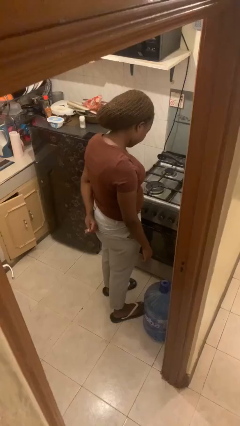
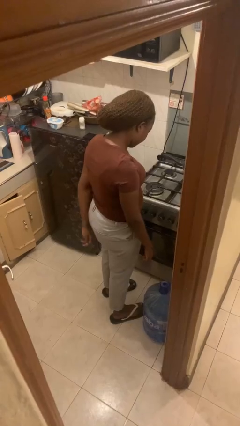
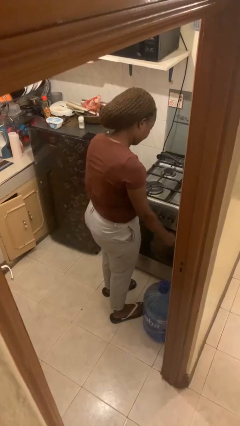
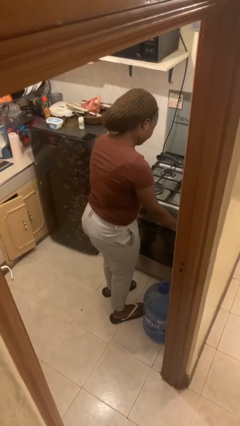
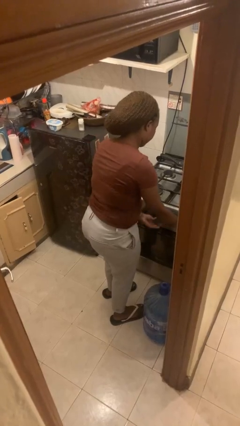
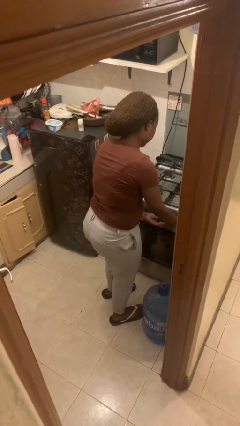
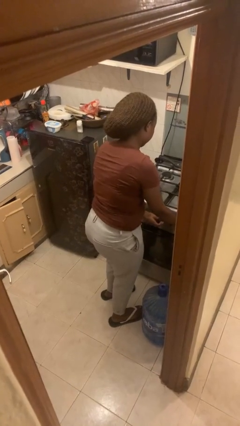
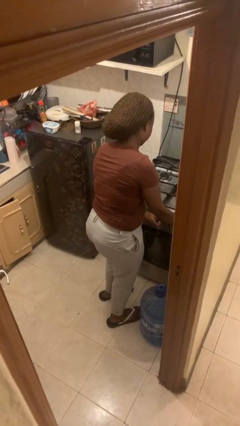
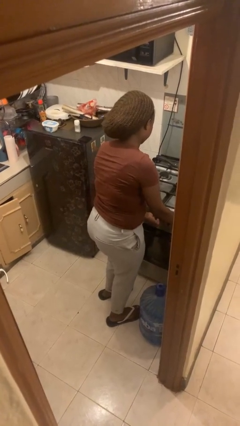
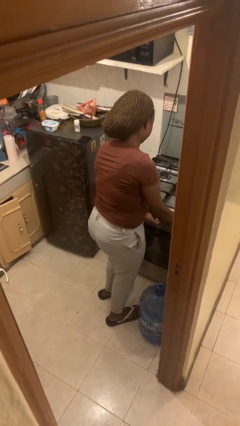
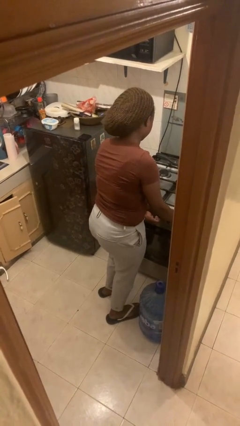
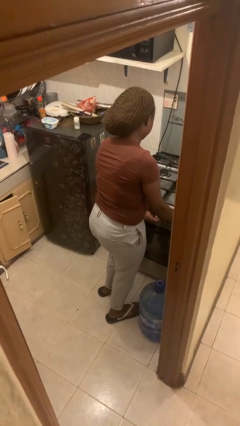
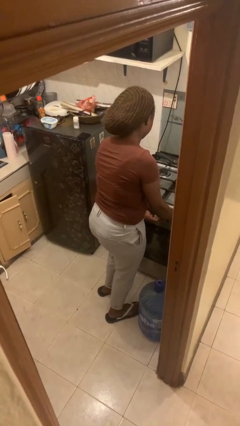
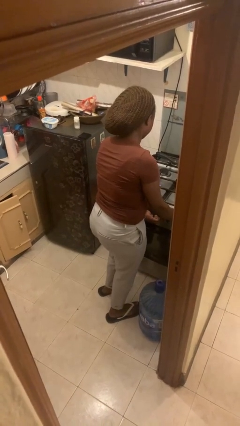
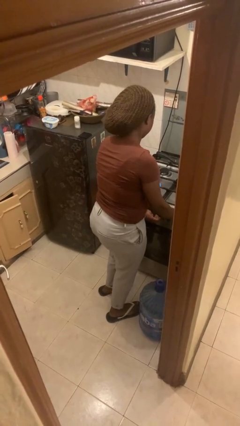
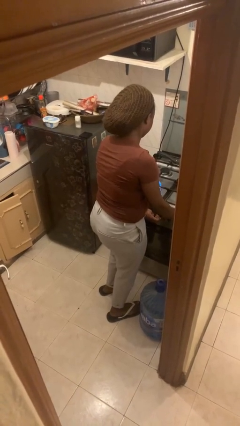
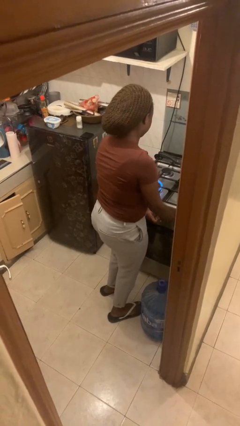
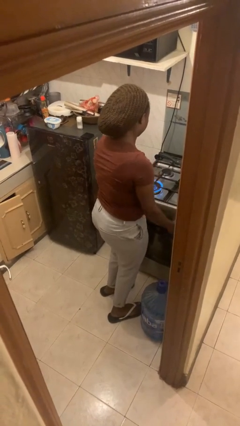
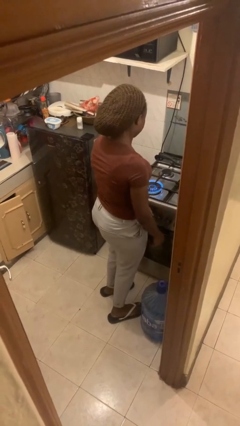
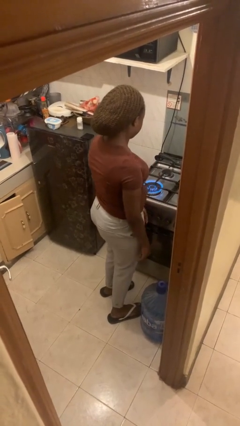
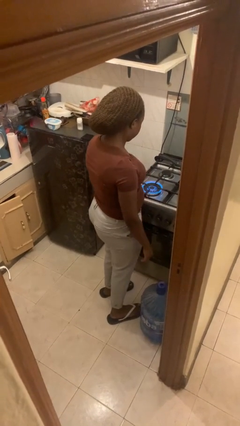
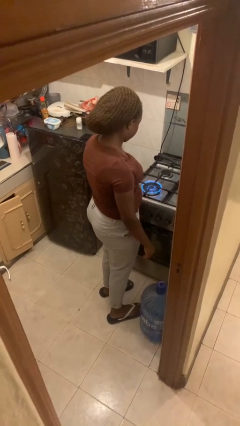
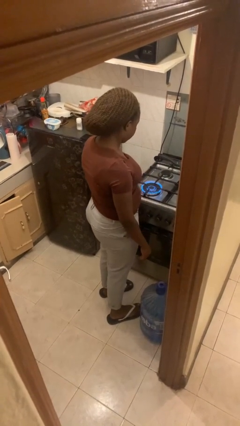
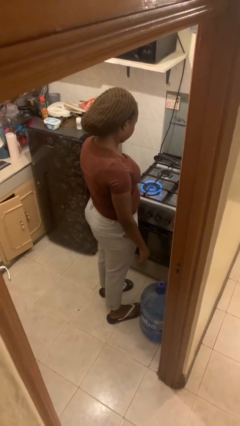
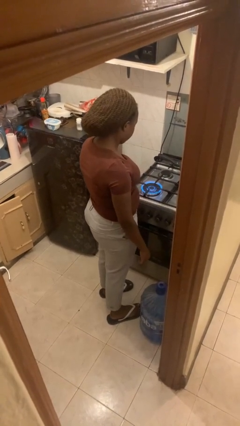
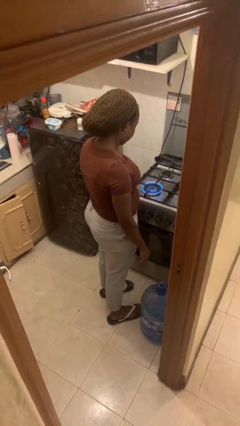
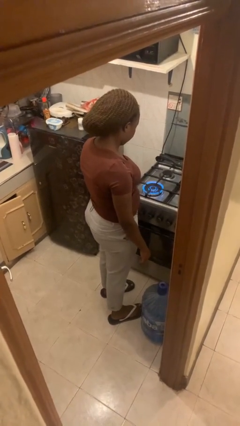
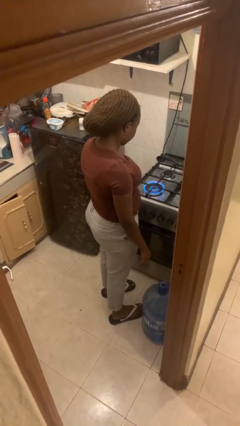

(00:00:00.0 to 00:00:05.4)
person turns on stovetop

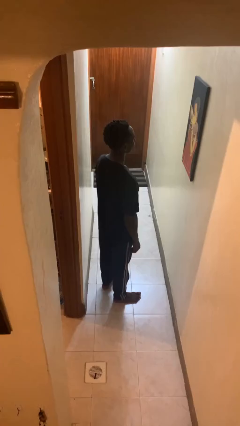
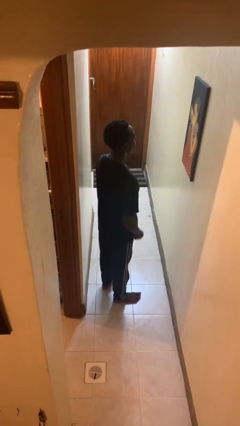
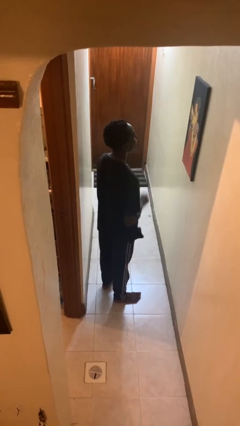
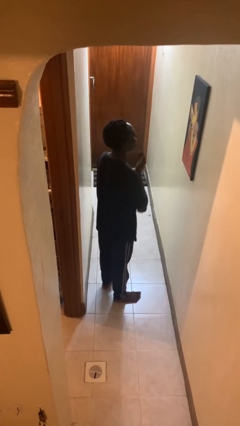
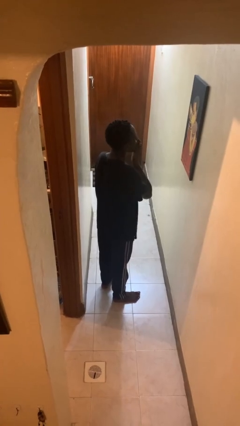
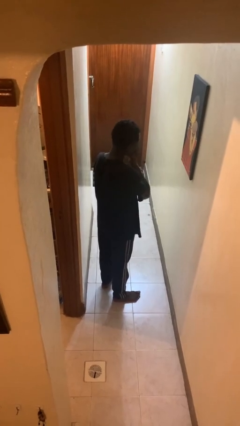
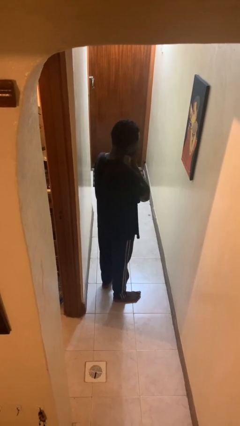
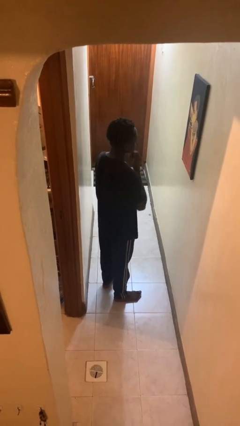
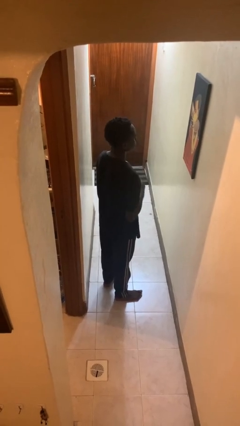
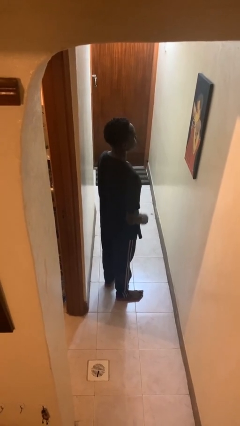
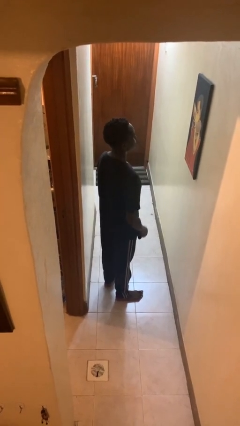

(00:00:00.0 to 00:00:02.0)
person sneezes into hand

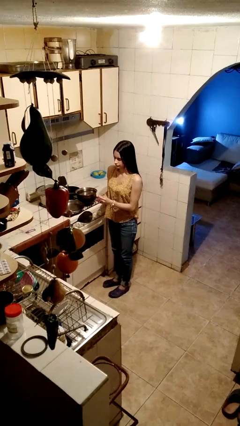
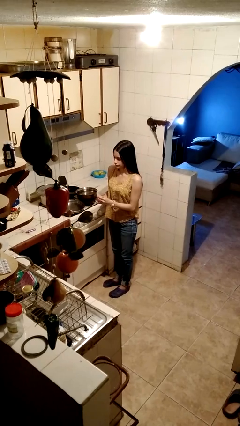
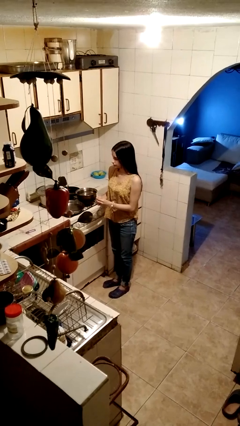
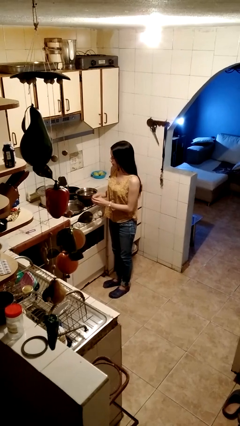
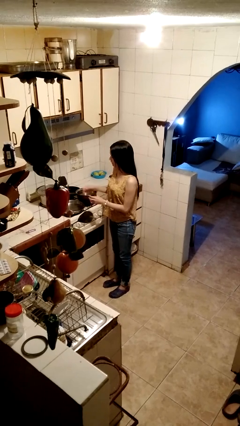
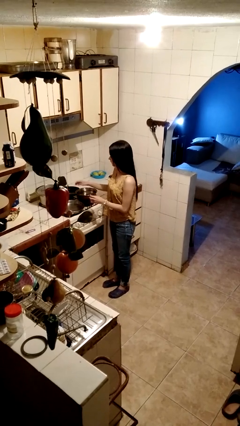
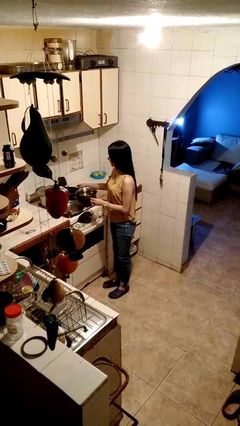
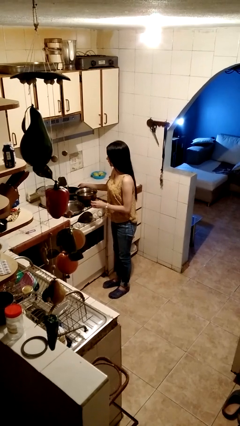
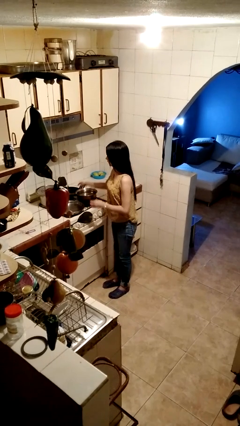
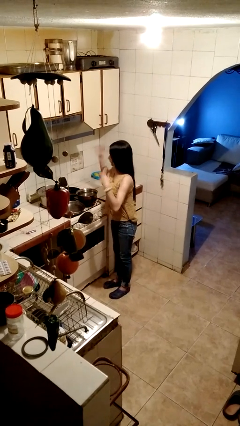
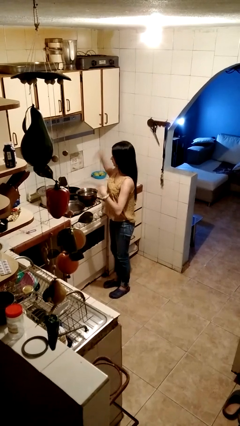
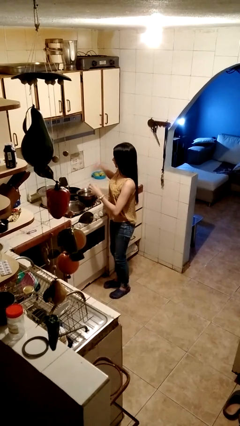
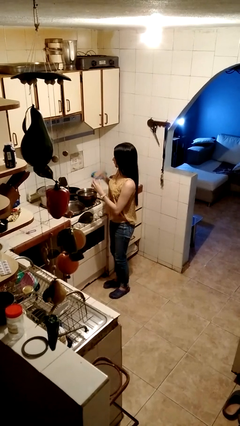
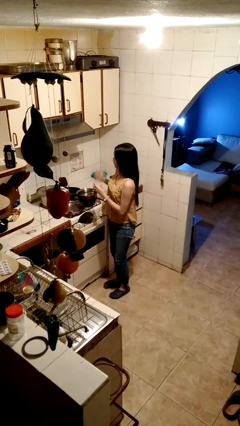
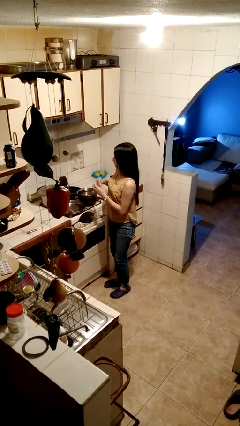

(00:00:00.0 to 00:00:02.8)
person burns hand

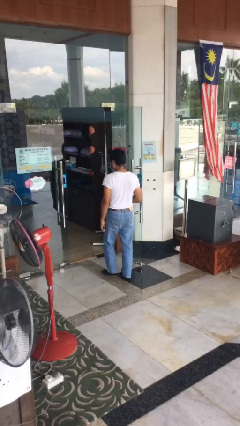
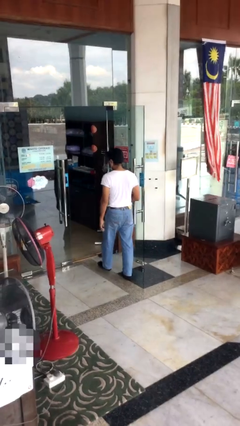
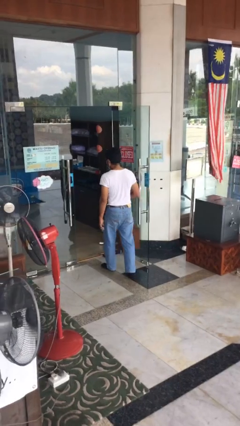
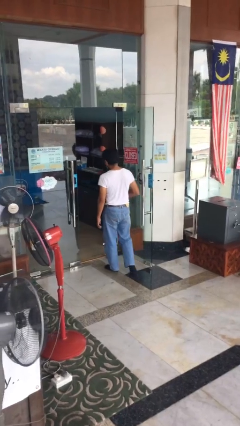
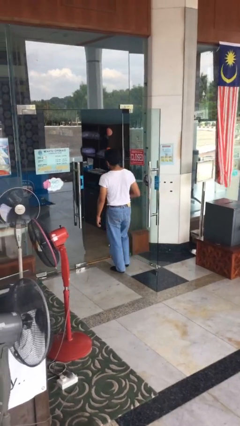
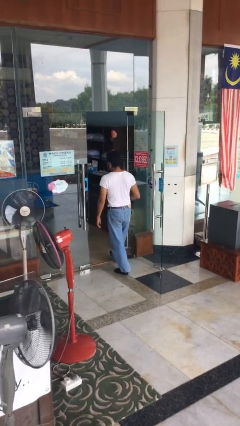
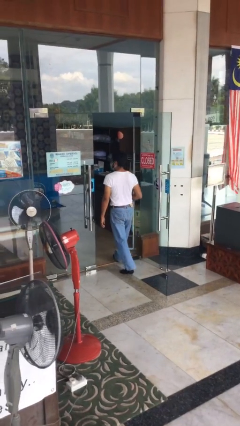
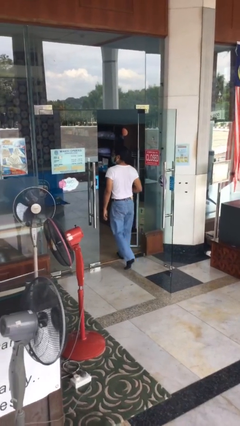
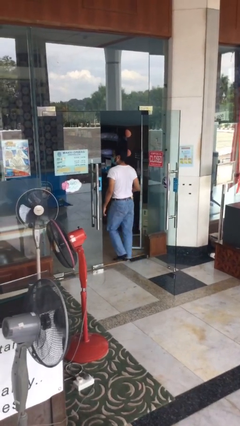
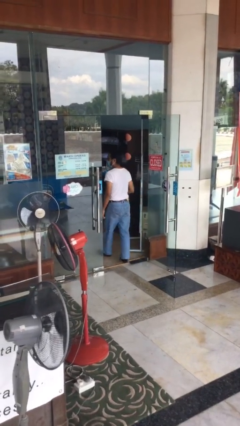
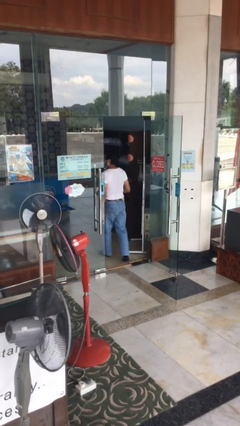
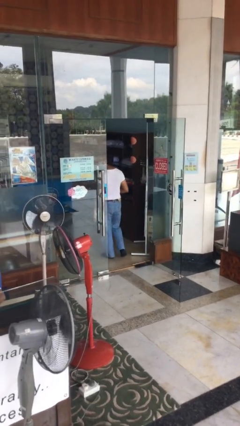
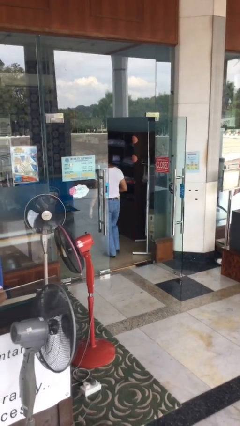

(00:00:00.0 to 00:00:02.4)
person exits scene through structure

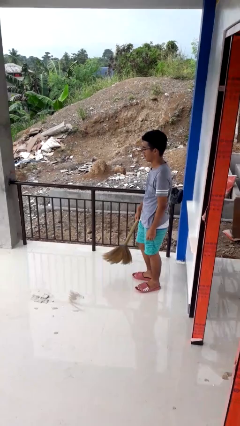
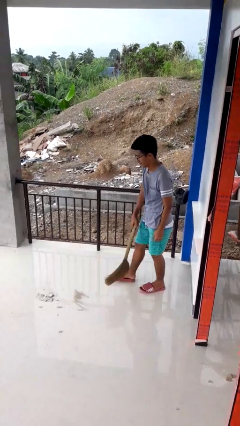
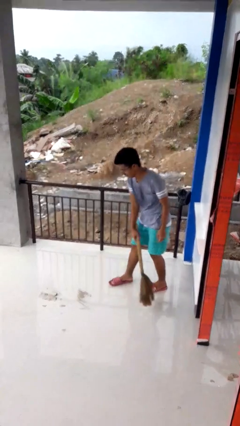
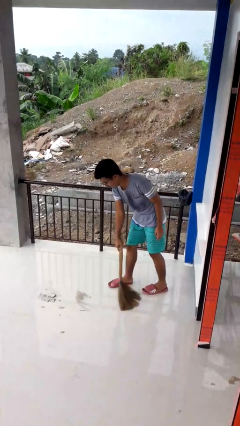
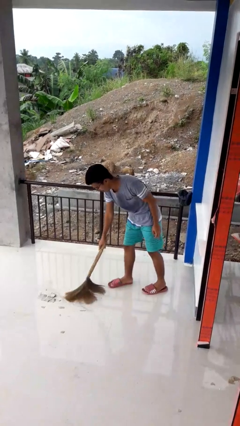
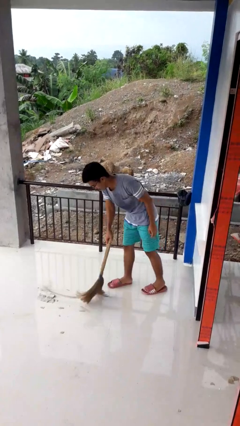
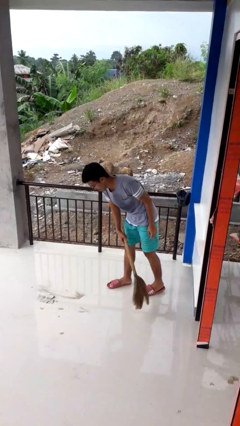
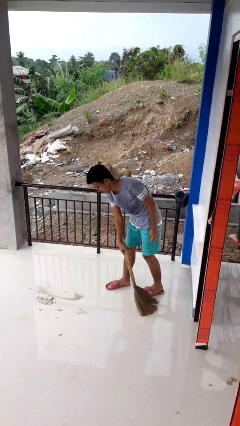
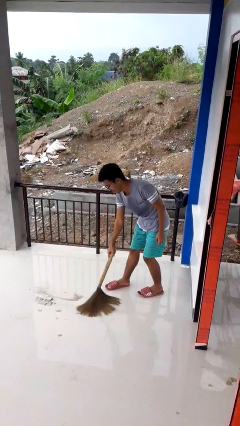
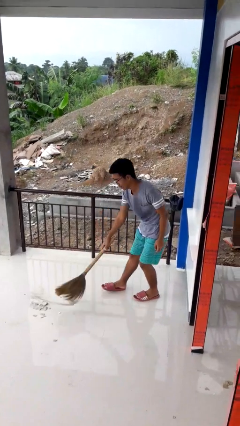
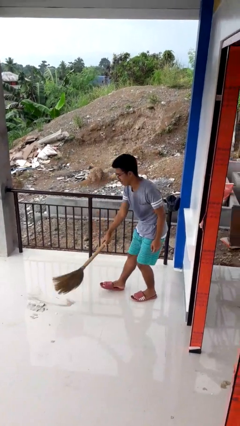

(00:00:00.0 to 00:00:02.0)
person sweeps floor

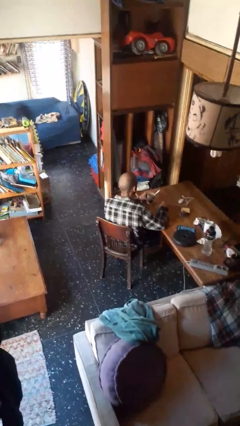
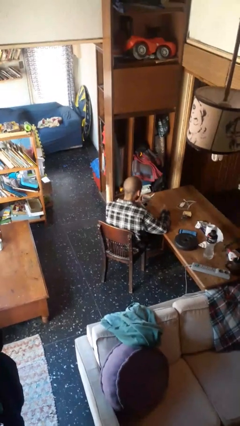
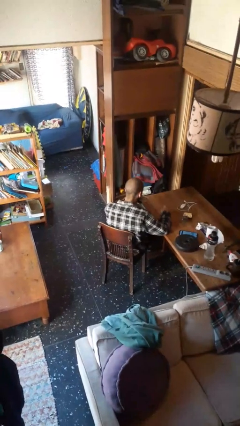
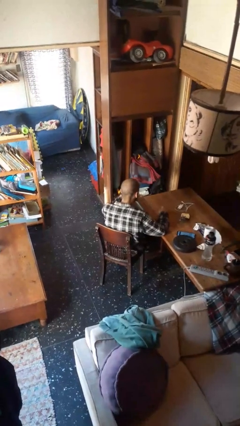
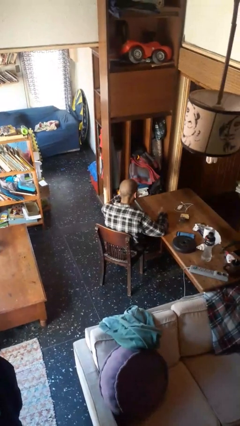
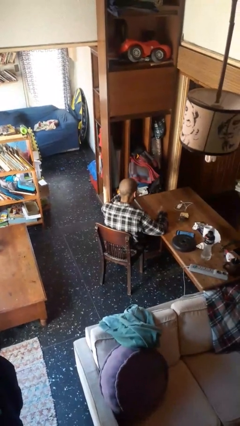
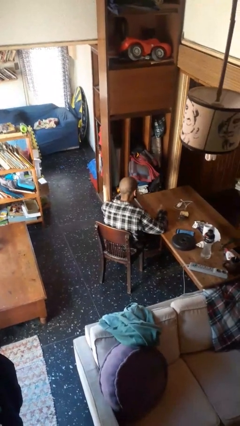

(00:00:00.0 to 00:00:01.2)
person drinks from mug

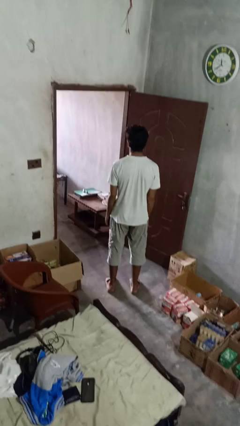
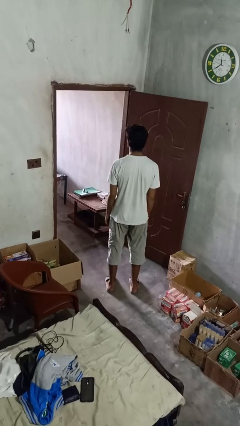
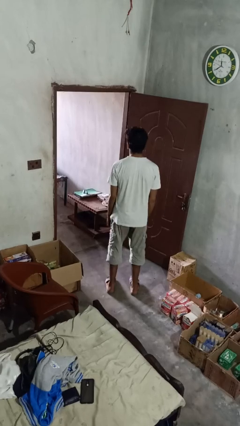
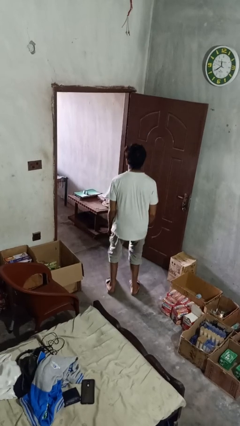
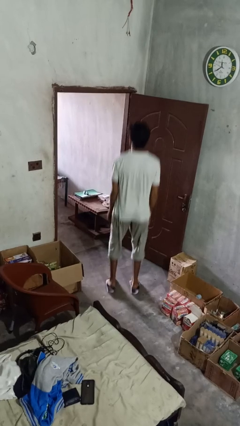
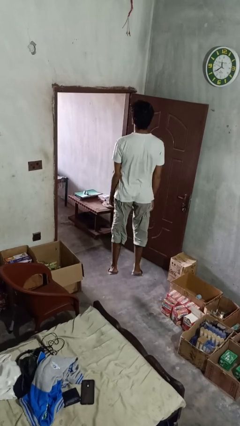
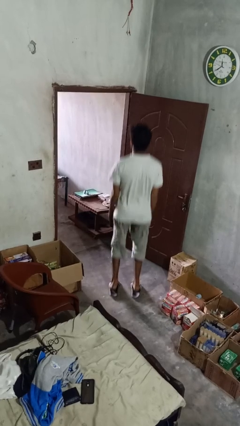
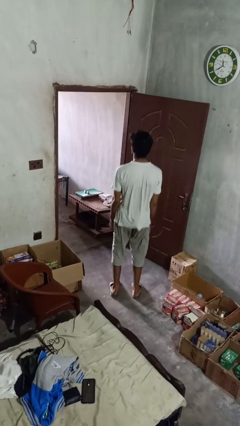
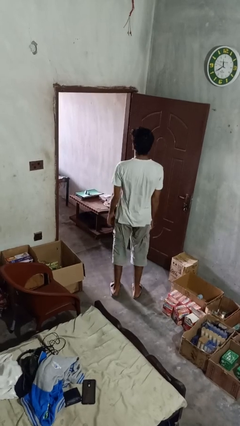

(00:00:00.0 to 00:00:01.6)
person jumps
